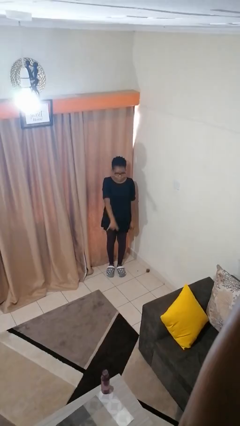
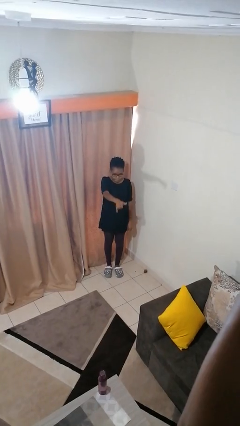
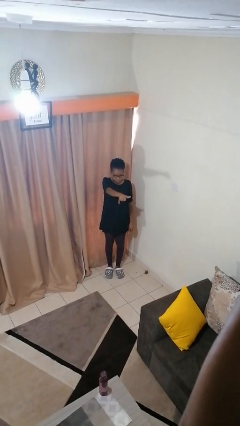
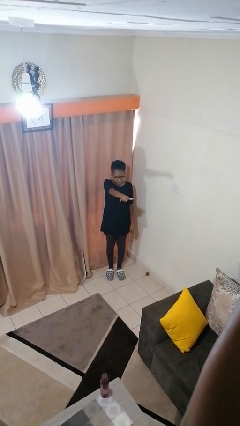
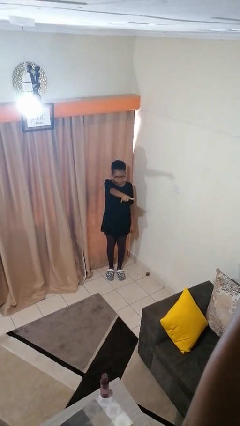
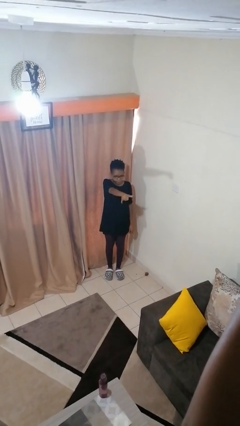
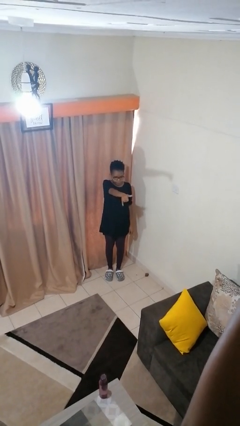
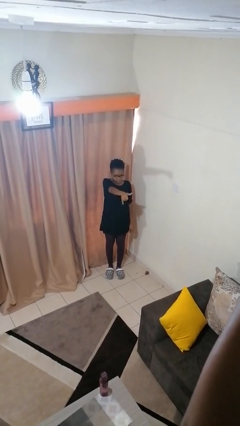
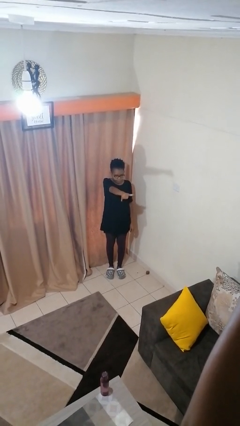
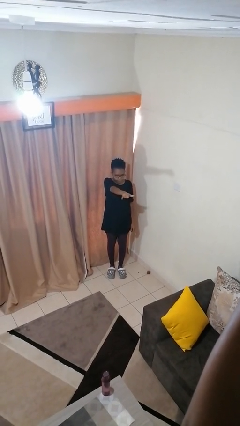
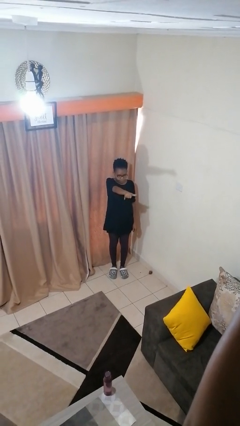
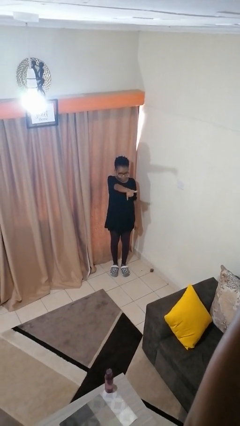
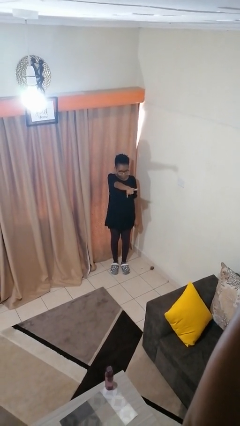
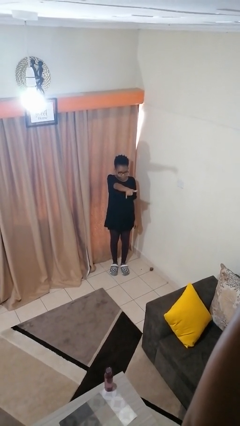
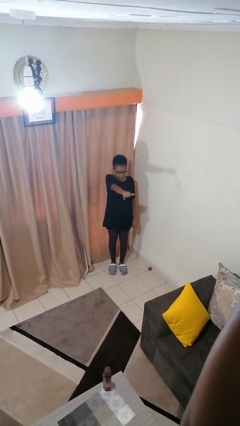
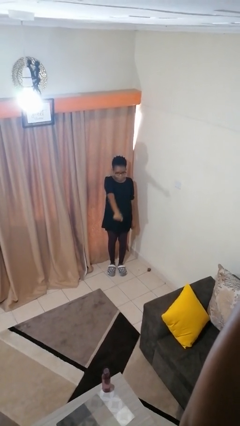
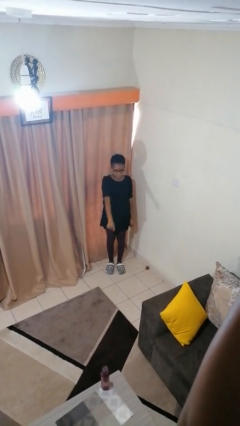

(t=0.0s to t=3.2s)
person gestures hang loose

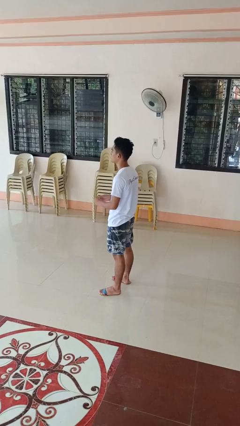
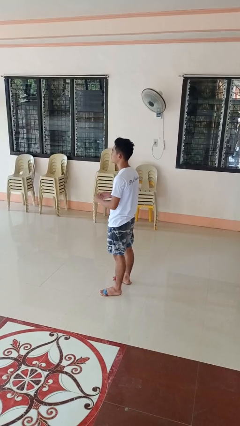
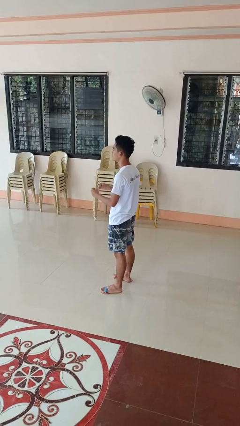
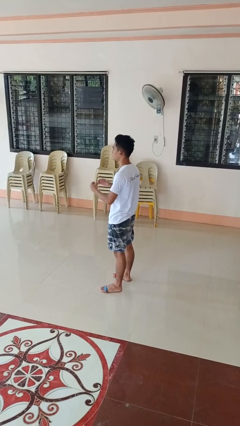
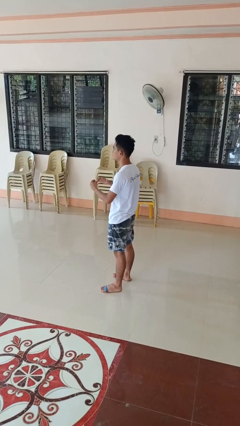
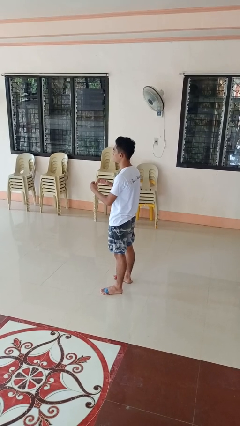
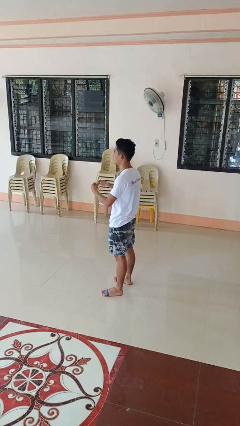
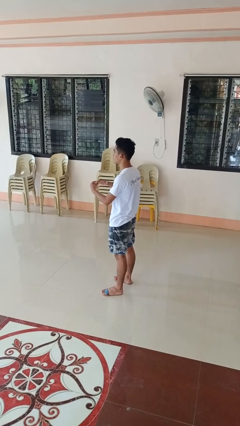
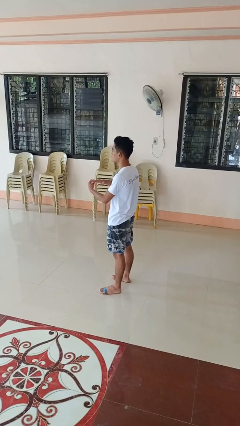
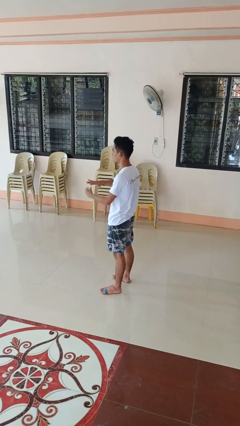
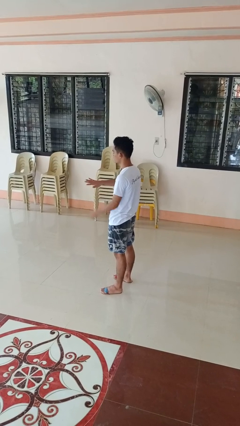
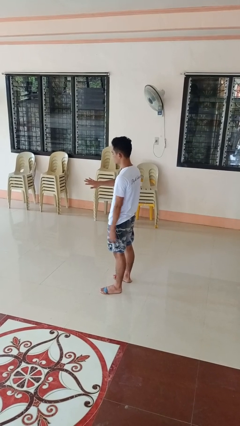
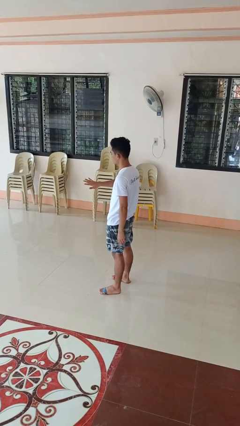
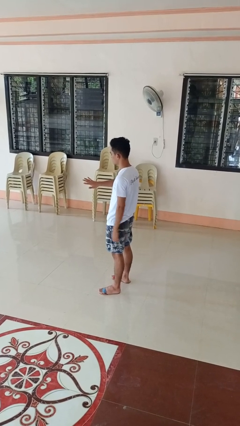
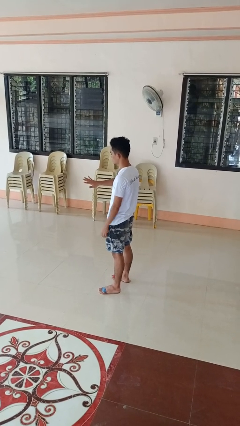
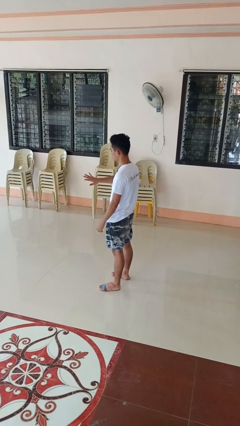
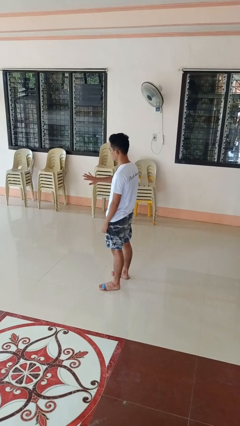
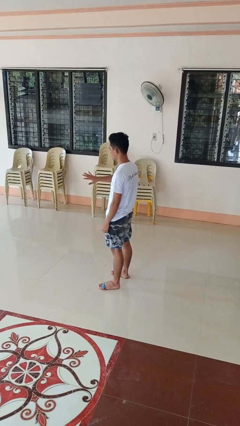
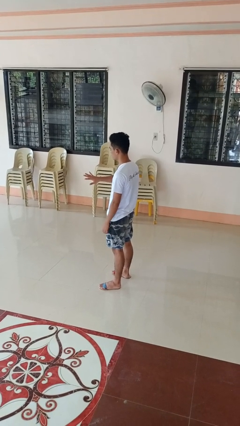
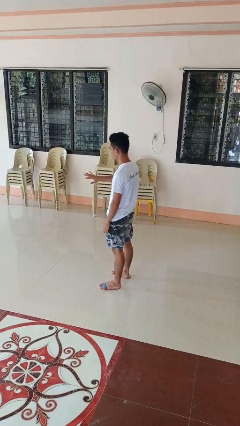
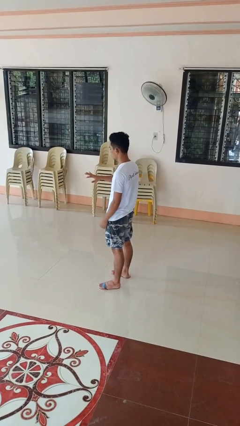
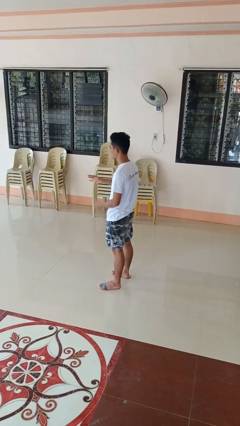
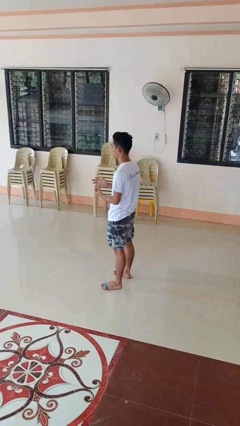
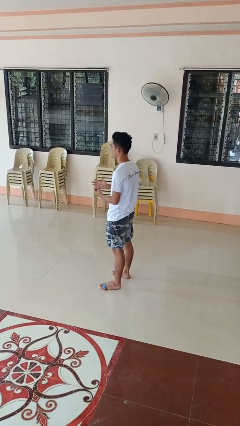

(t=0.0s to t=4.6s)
person puts on ring

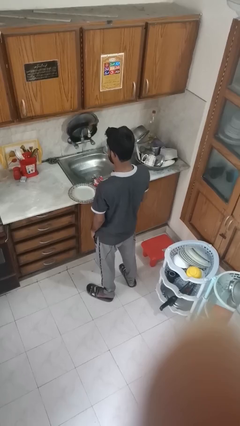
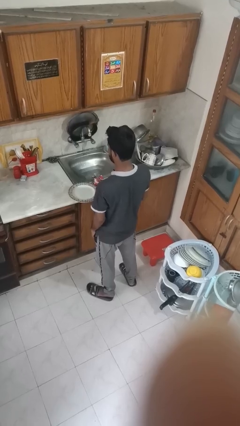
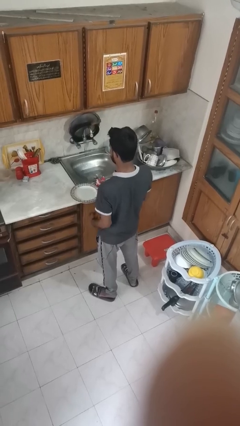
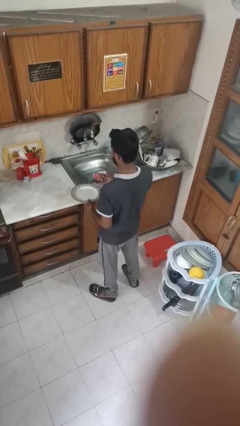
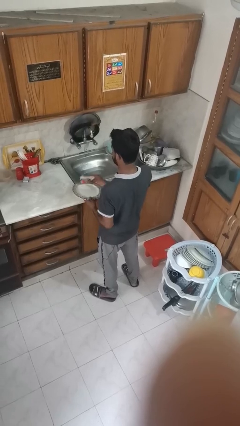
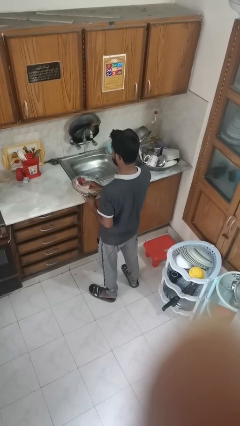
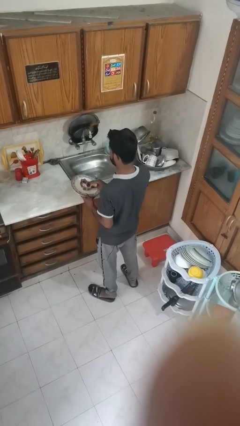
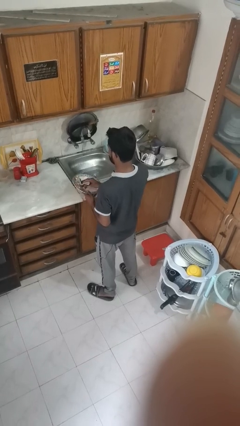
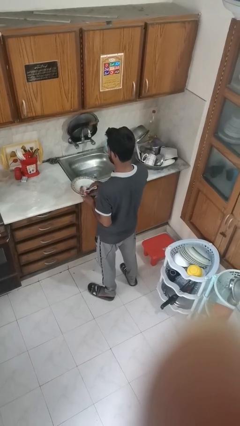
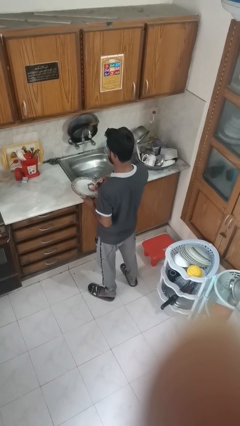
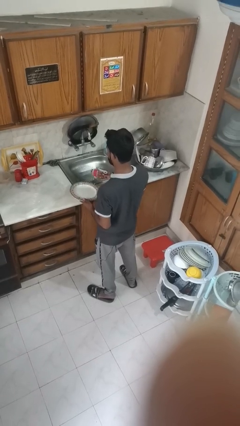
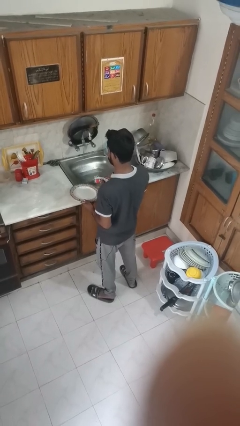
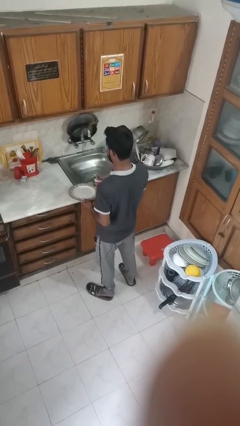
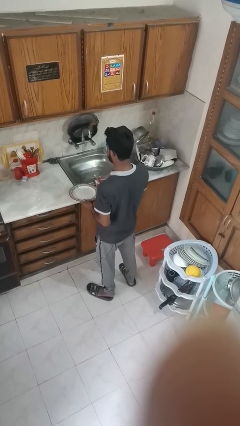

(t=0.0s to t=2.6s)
person dries dish

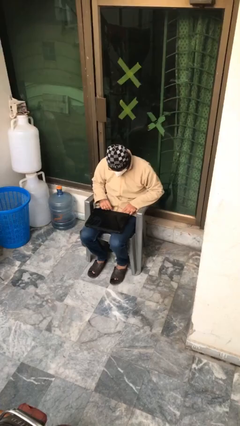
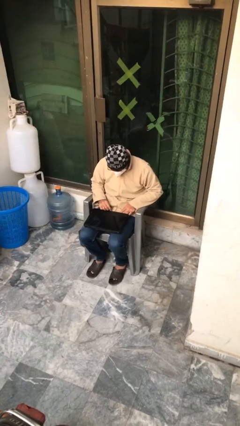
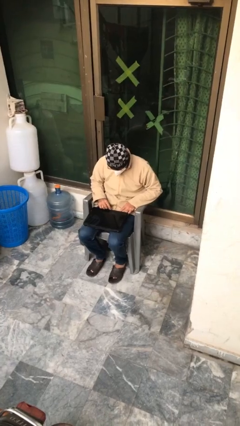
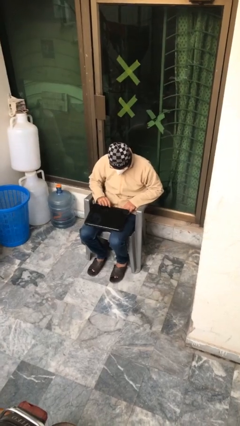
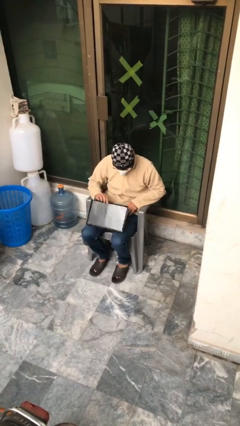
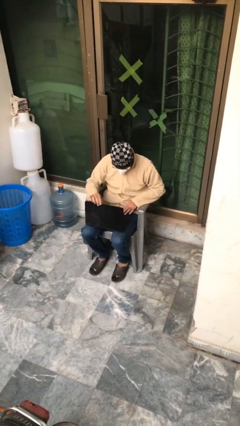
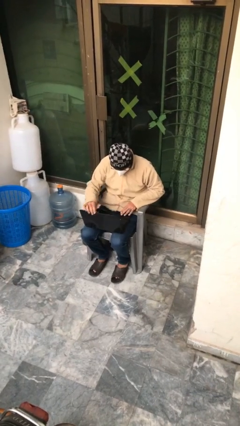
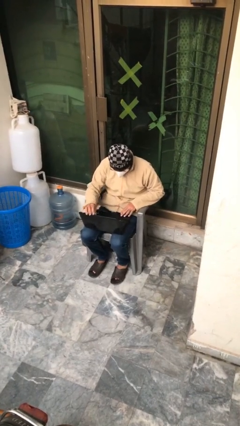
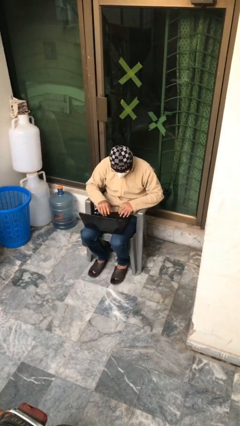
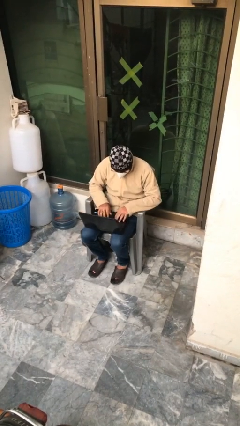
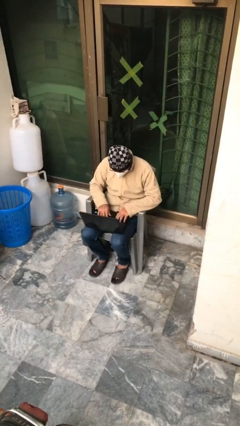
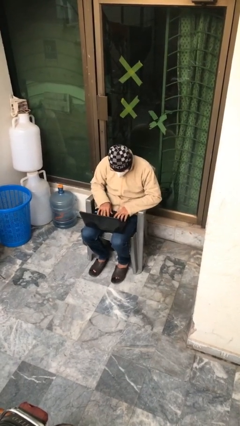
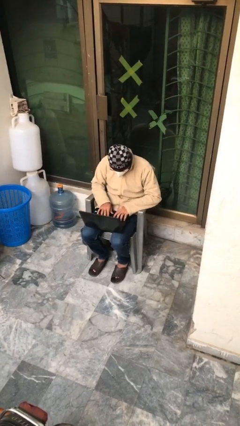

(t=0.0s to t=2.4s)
person interacts with laptop

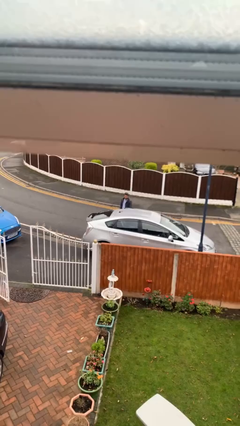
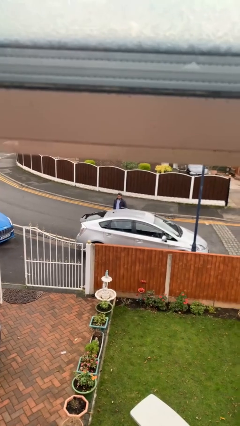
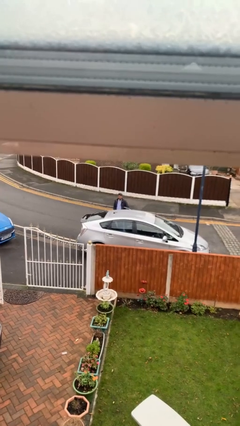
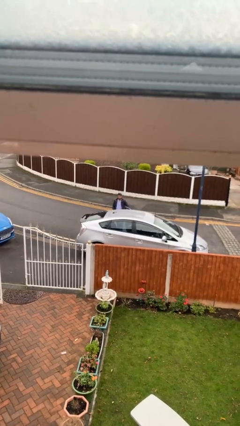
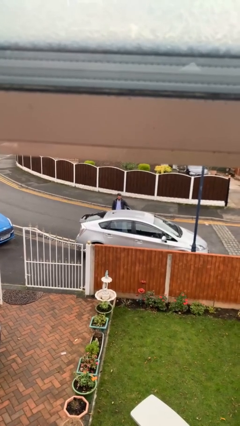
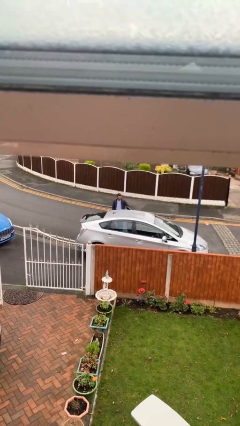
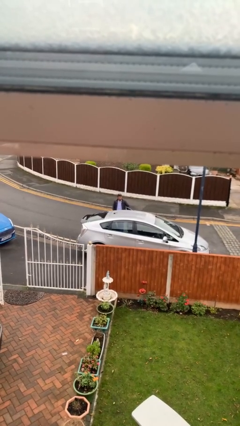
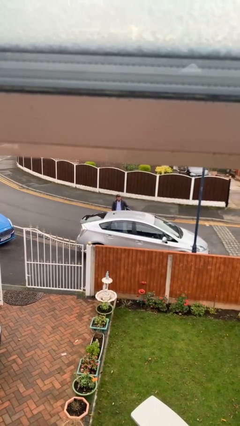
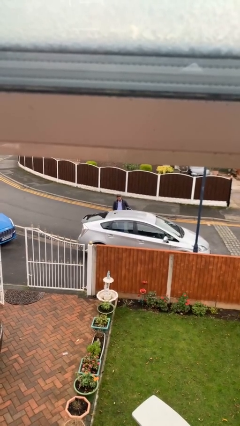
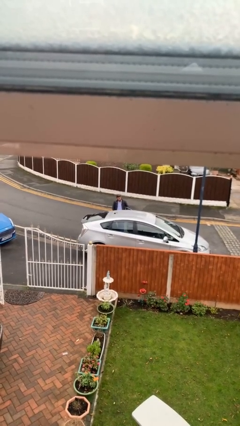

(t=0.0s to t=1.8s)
person opens car door

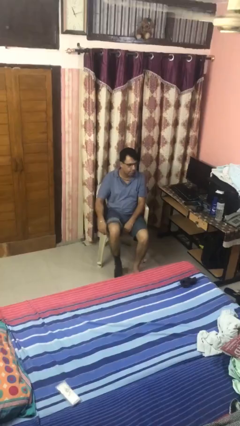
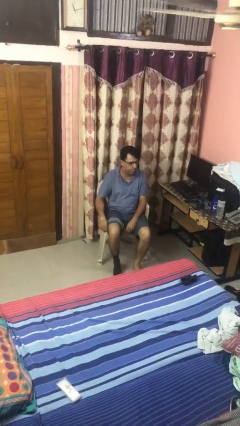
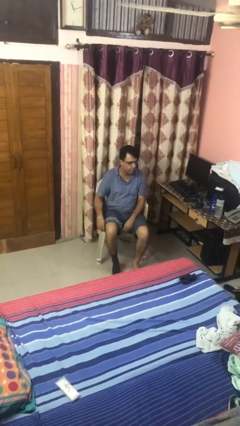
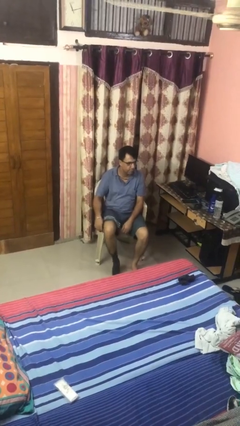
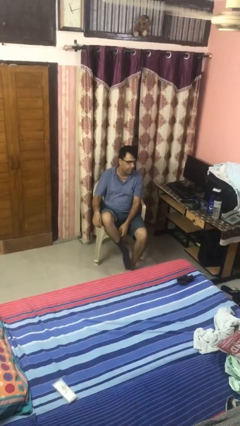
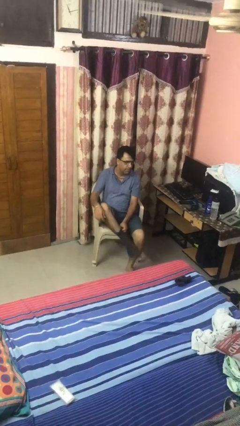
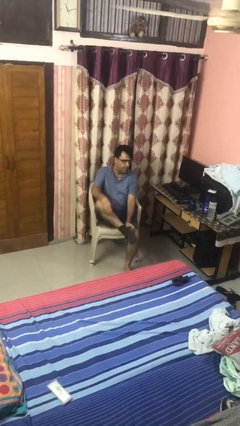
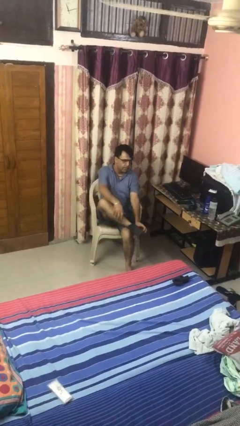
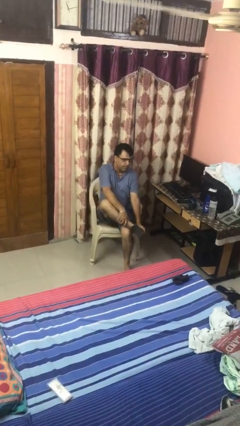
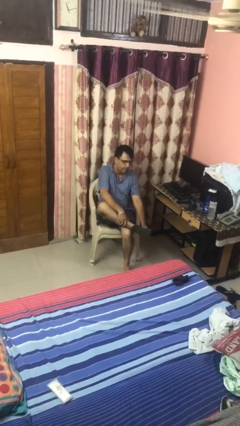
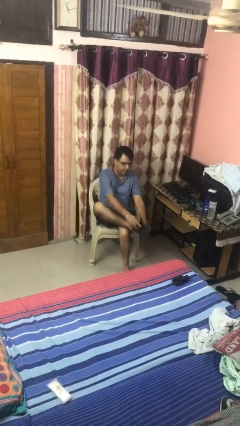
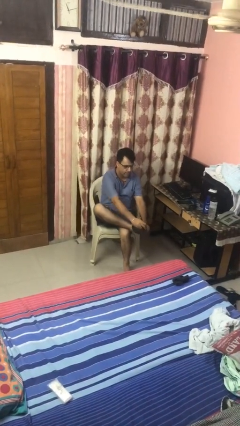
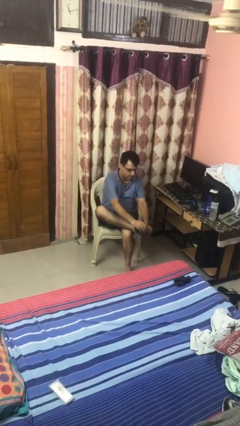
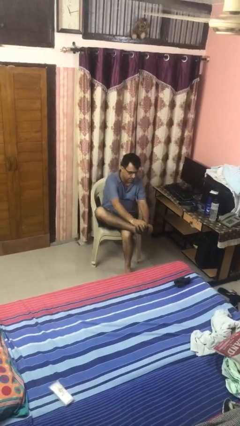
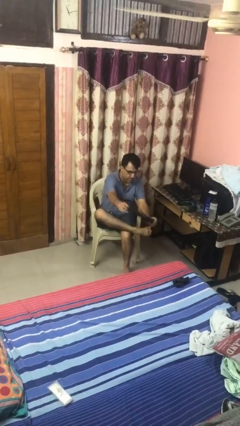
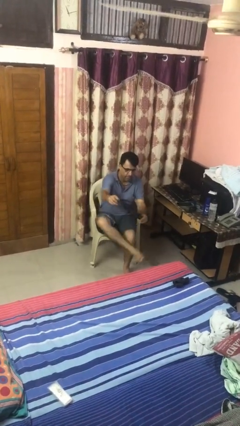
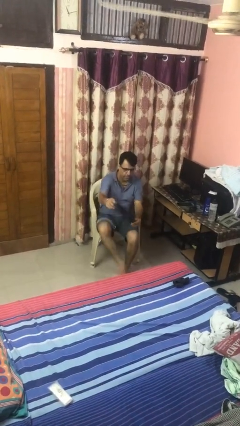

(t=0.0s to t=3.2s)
person takes off socks
